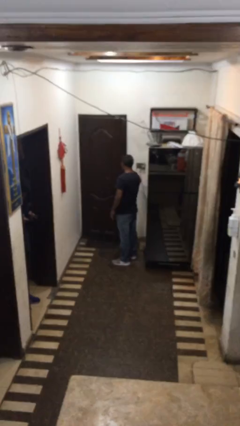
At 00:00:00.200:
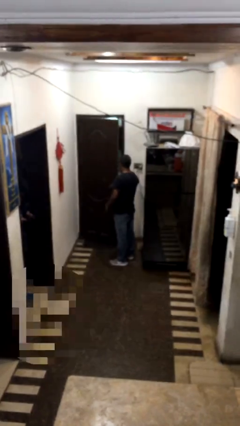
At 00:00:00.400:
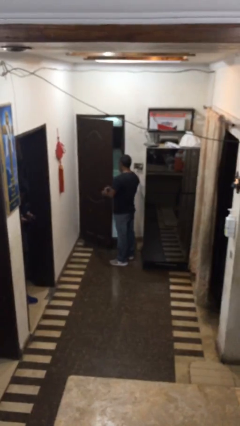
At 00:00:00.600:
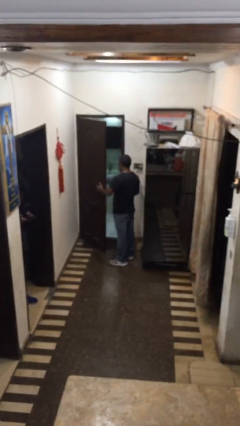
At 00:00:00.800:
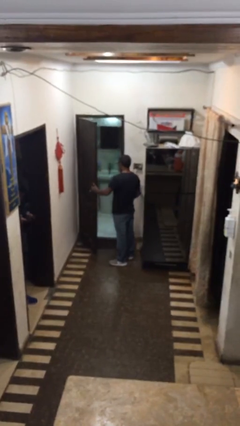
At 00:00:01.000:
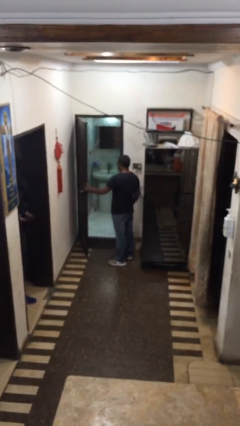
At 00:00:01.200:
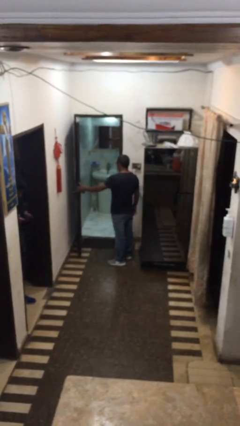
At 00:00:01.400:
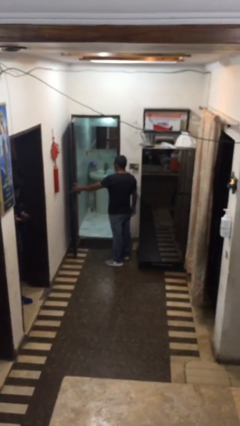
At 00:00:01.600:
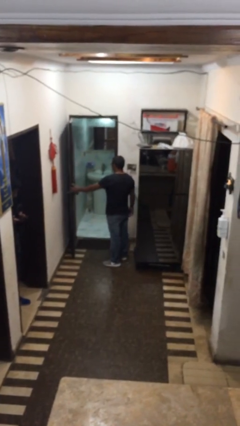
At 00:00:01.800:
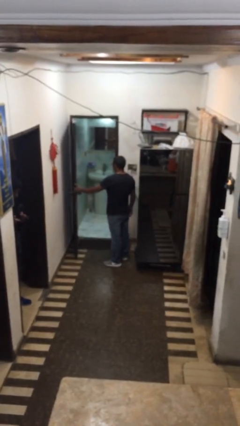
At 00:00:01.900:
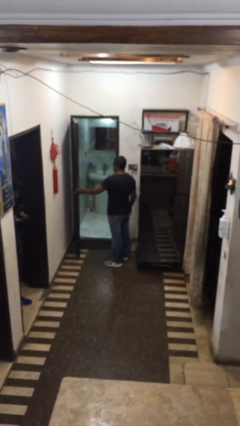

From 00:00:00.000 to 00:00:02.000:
person opens facility door

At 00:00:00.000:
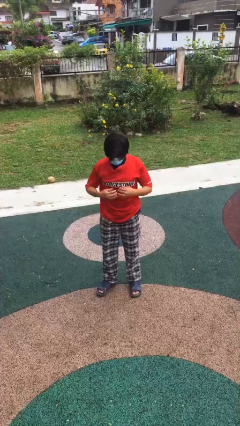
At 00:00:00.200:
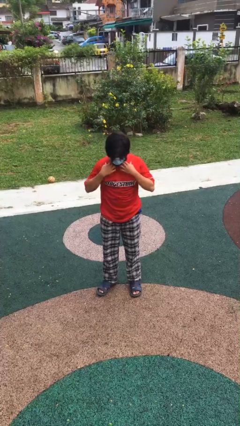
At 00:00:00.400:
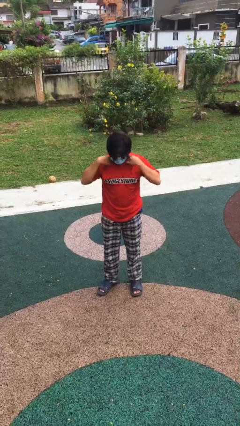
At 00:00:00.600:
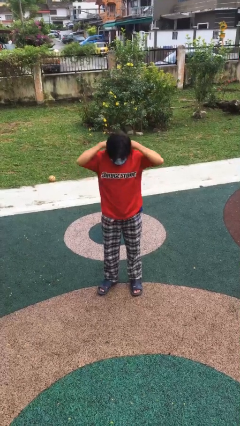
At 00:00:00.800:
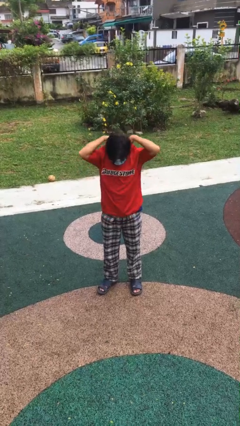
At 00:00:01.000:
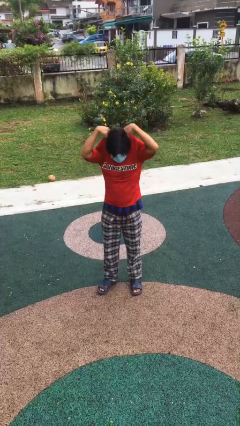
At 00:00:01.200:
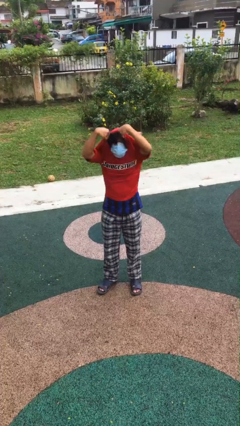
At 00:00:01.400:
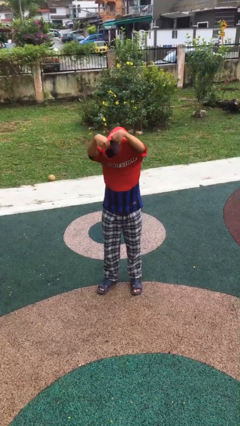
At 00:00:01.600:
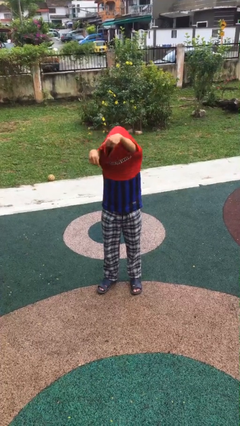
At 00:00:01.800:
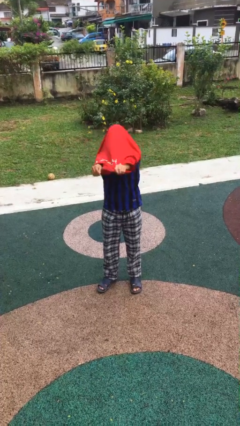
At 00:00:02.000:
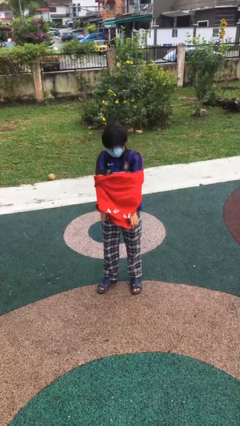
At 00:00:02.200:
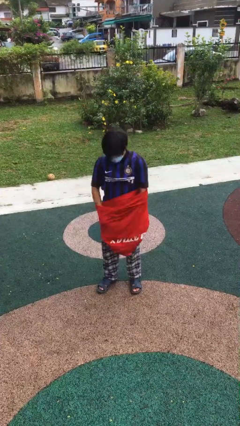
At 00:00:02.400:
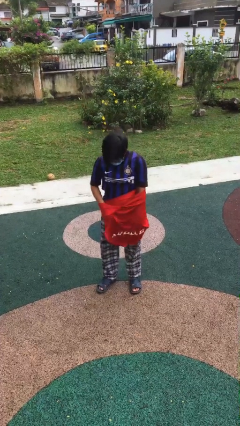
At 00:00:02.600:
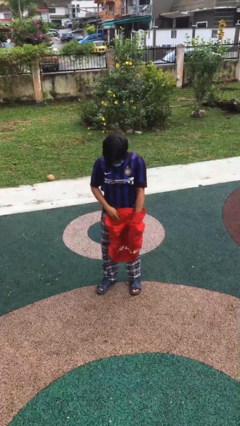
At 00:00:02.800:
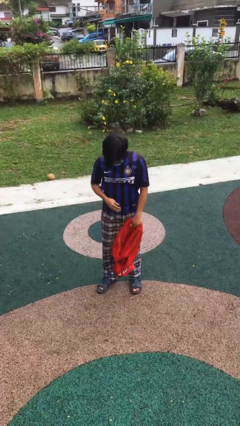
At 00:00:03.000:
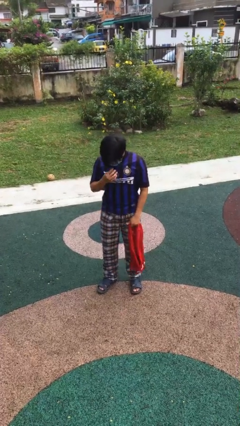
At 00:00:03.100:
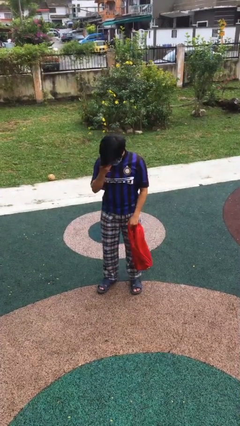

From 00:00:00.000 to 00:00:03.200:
person takes off shirt

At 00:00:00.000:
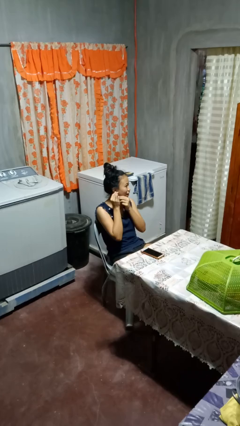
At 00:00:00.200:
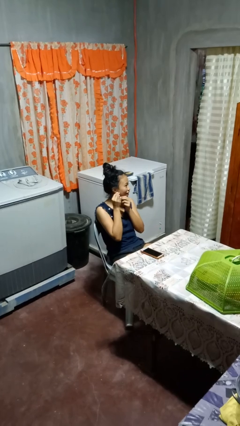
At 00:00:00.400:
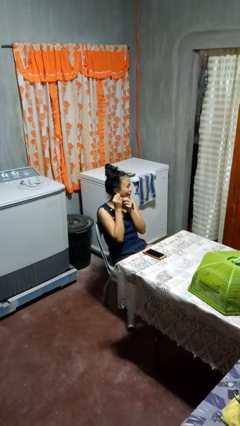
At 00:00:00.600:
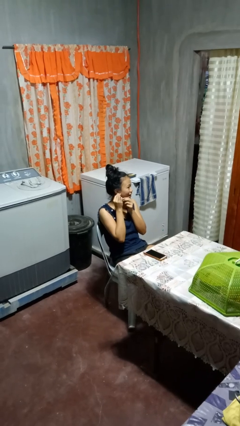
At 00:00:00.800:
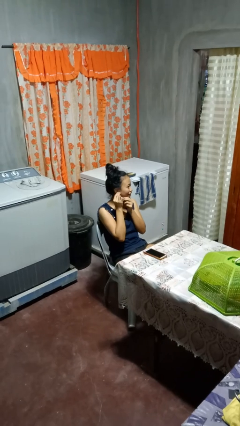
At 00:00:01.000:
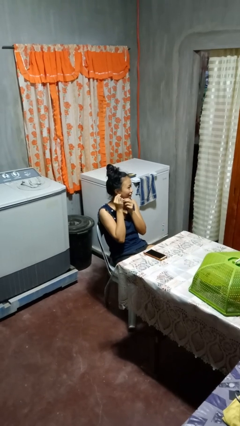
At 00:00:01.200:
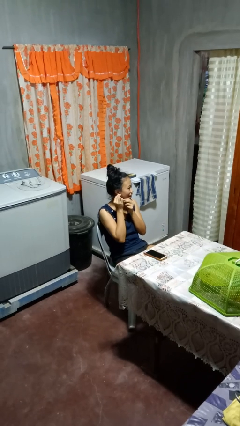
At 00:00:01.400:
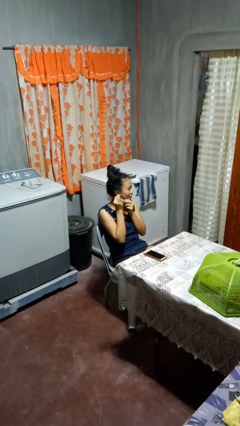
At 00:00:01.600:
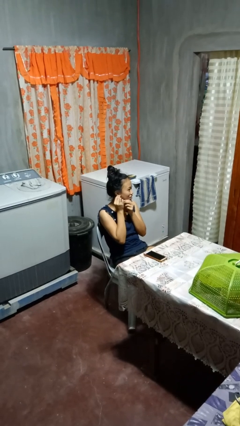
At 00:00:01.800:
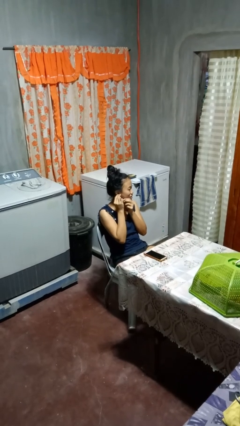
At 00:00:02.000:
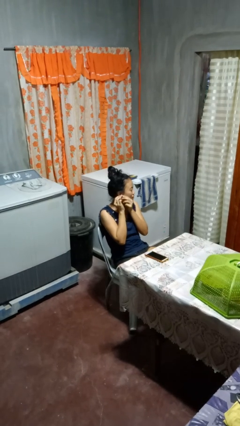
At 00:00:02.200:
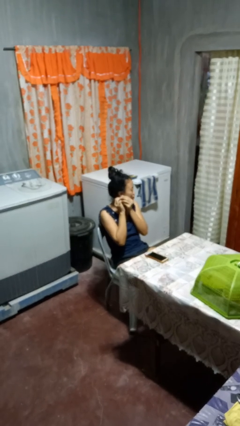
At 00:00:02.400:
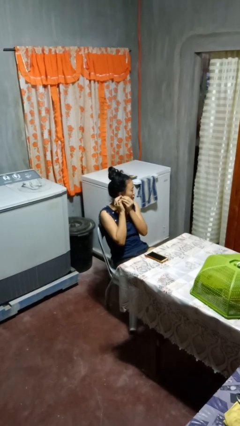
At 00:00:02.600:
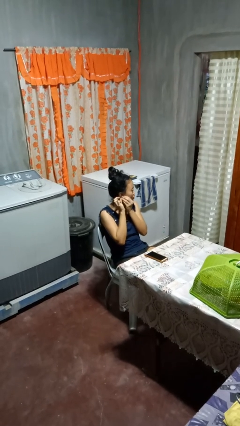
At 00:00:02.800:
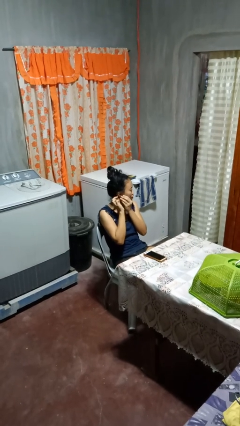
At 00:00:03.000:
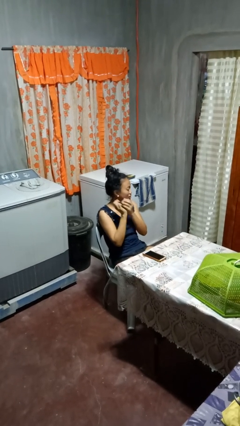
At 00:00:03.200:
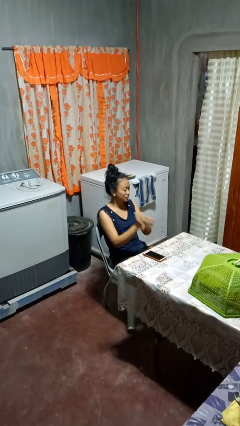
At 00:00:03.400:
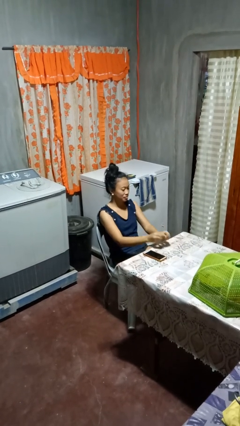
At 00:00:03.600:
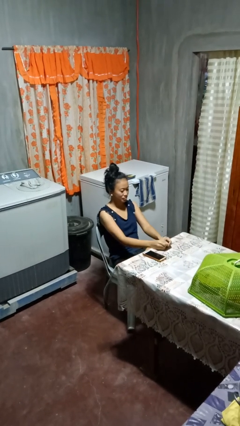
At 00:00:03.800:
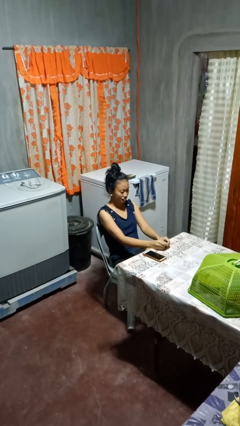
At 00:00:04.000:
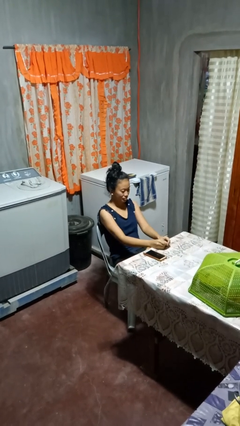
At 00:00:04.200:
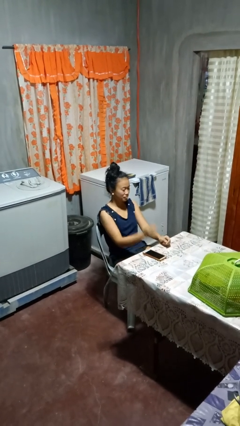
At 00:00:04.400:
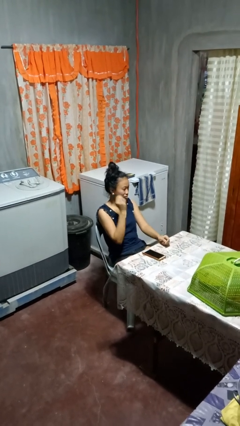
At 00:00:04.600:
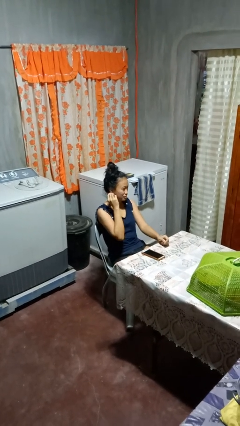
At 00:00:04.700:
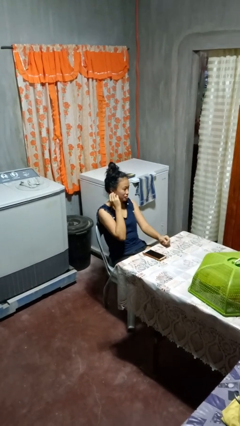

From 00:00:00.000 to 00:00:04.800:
person puts on earrings

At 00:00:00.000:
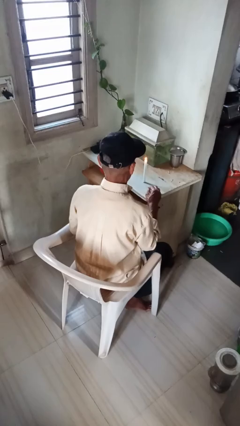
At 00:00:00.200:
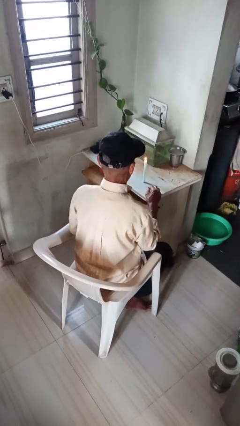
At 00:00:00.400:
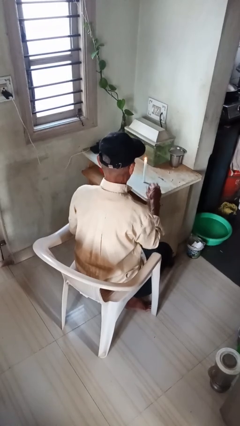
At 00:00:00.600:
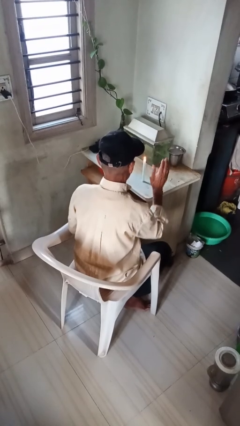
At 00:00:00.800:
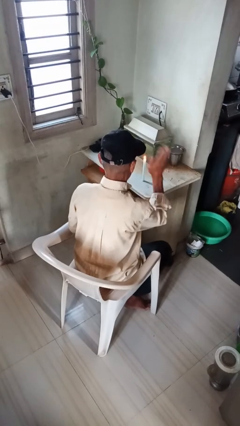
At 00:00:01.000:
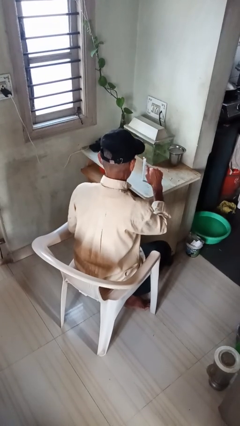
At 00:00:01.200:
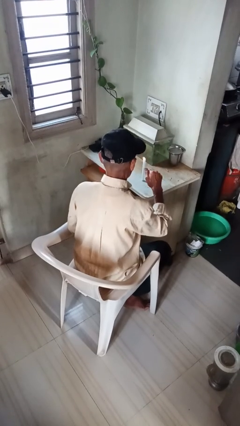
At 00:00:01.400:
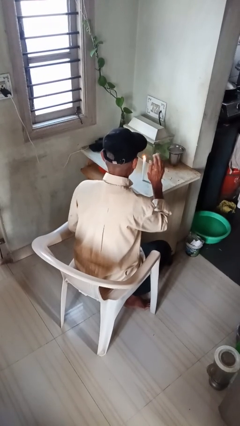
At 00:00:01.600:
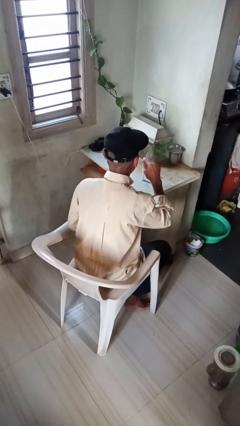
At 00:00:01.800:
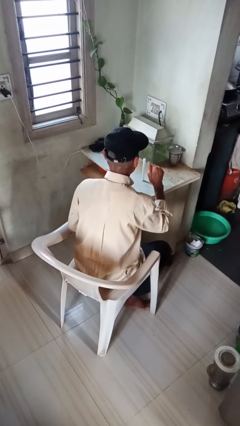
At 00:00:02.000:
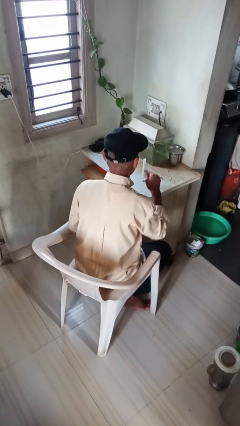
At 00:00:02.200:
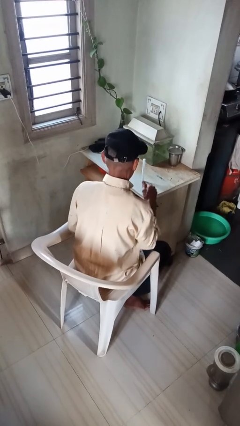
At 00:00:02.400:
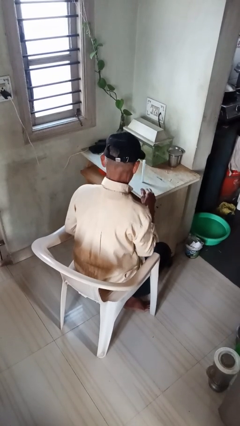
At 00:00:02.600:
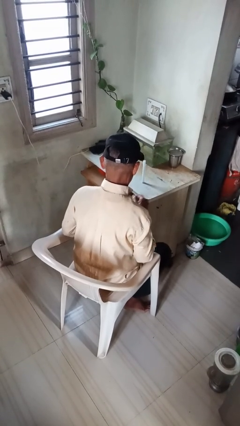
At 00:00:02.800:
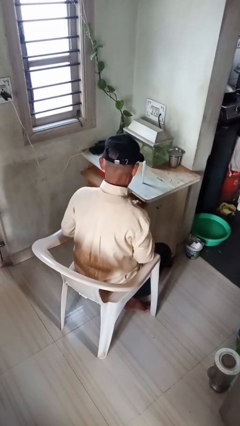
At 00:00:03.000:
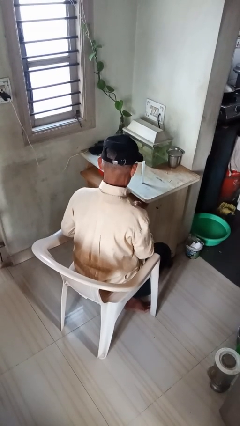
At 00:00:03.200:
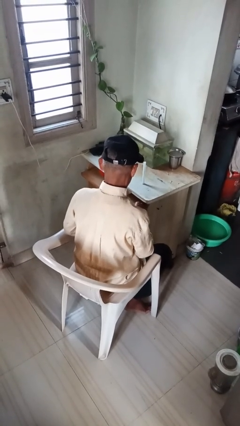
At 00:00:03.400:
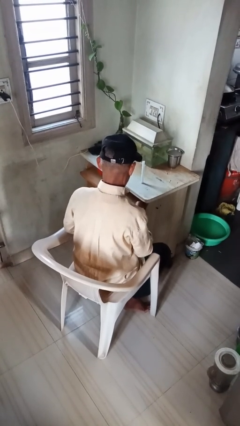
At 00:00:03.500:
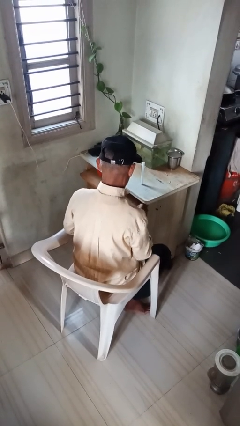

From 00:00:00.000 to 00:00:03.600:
person extinguishes candle

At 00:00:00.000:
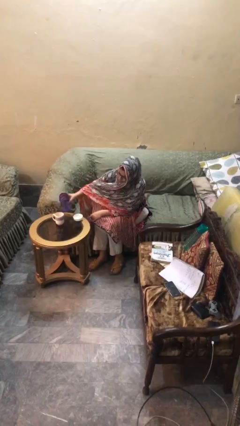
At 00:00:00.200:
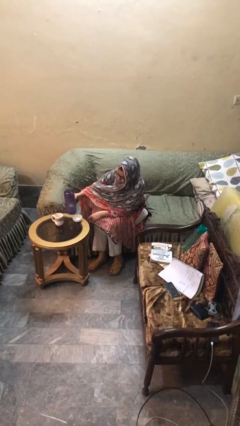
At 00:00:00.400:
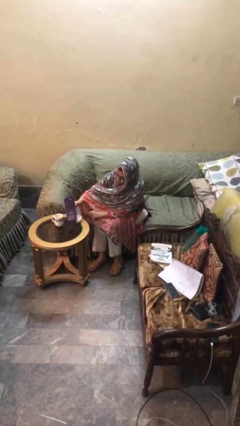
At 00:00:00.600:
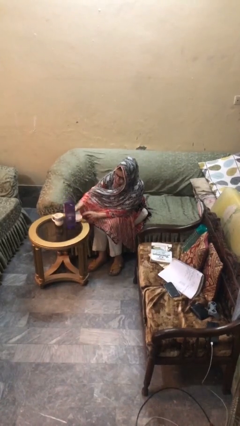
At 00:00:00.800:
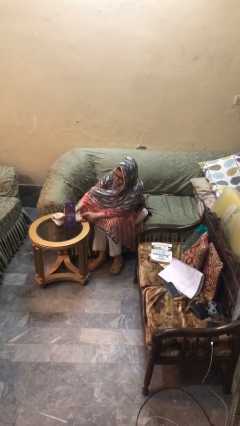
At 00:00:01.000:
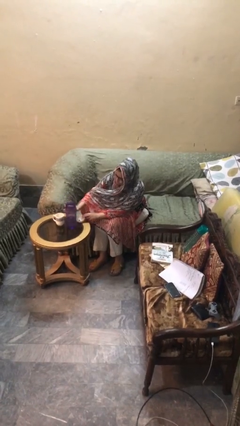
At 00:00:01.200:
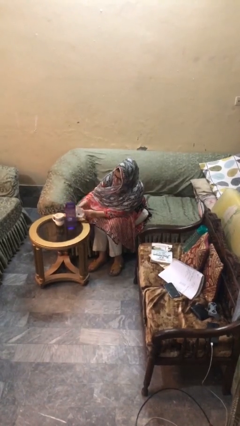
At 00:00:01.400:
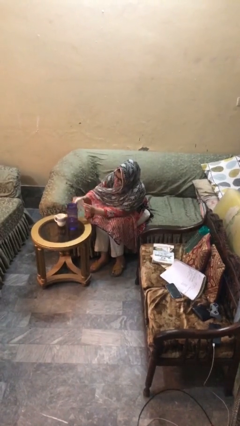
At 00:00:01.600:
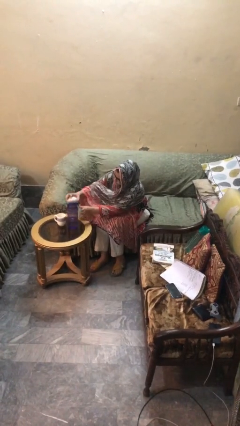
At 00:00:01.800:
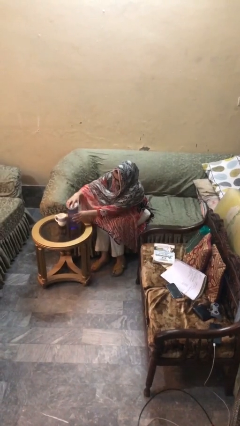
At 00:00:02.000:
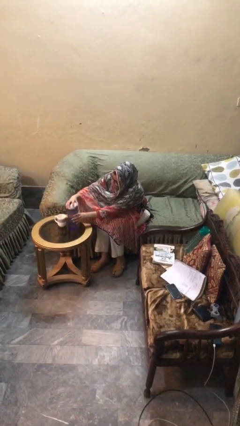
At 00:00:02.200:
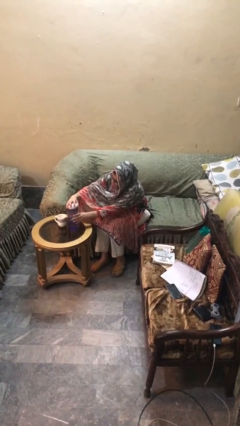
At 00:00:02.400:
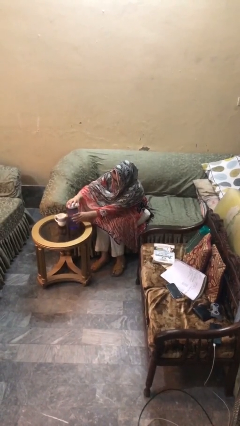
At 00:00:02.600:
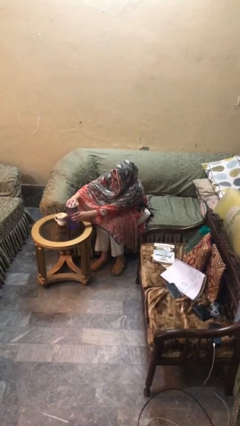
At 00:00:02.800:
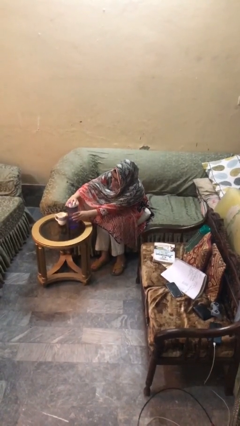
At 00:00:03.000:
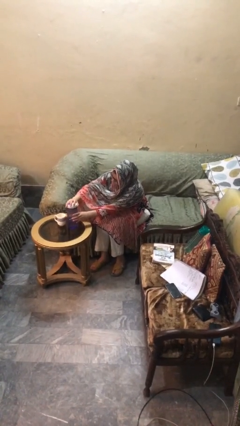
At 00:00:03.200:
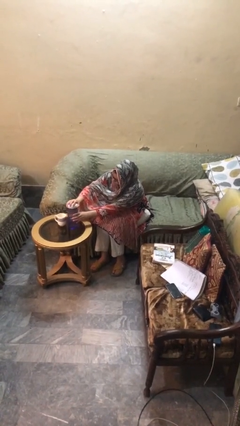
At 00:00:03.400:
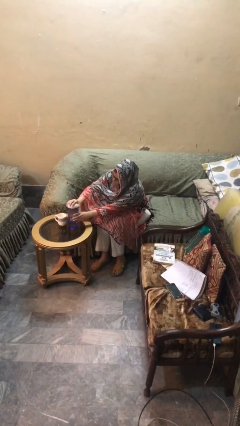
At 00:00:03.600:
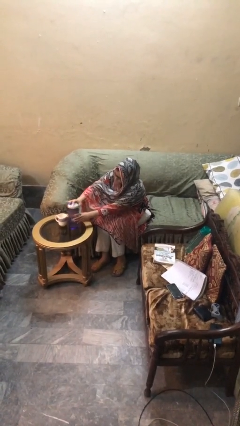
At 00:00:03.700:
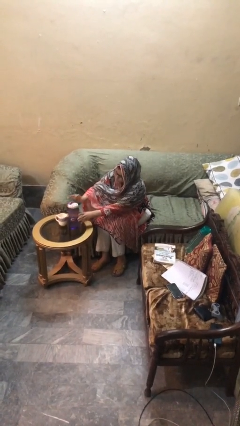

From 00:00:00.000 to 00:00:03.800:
person screws lid to bottle
